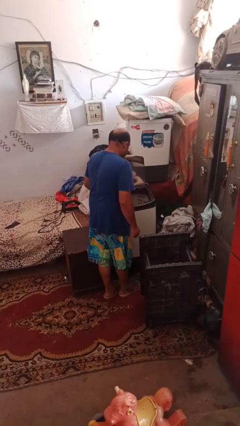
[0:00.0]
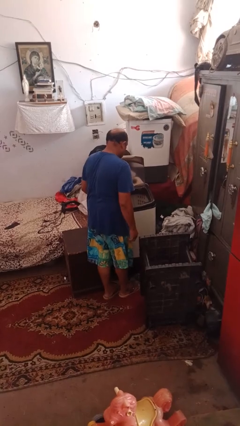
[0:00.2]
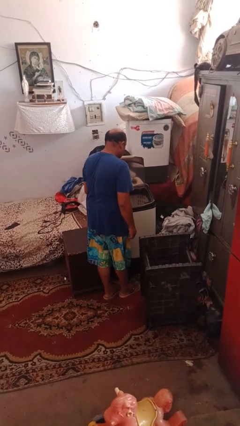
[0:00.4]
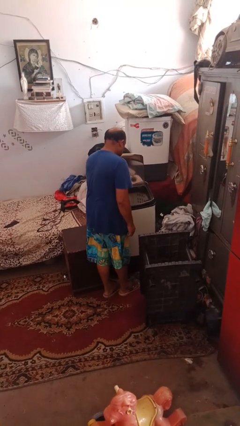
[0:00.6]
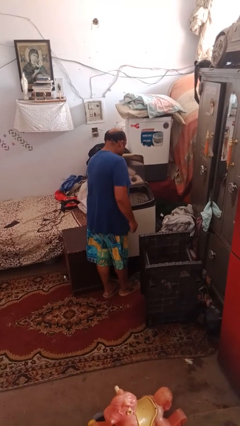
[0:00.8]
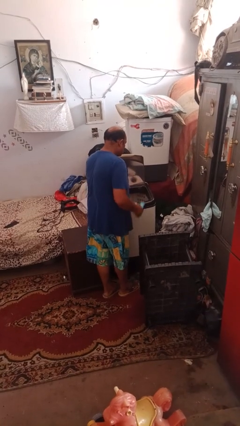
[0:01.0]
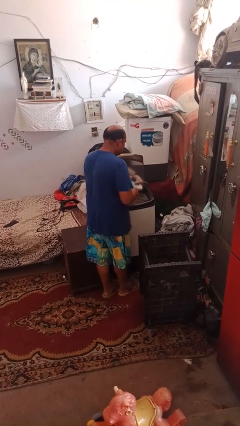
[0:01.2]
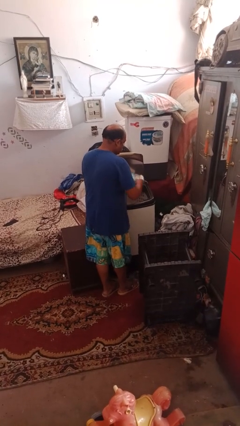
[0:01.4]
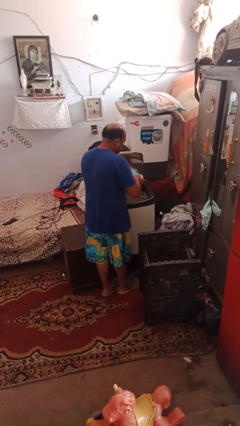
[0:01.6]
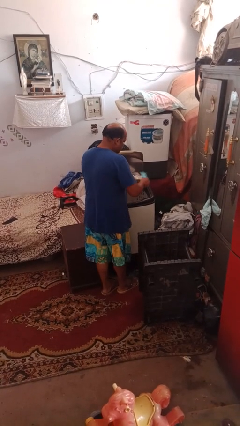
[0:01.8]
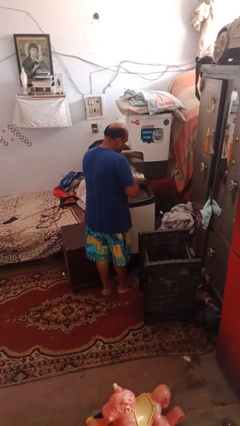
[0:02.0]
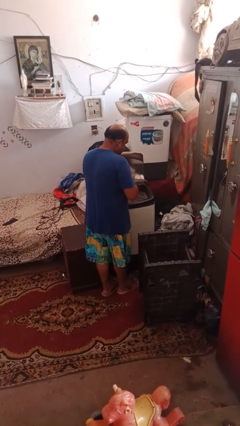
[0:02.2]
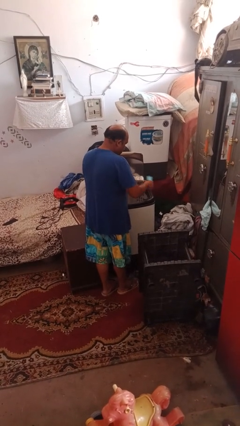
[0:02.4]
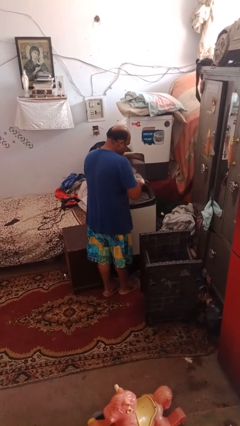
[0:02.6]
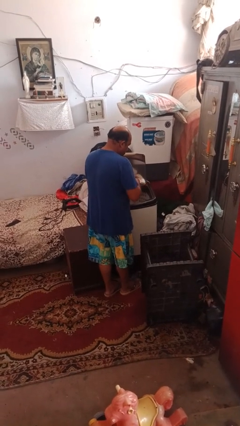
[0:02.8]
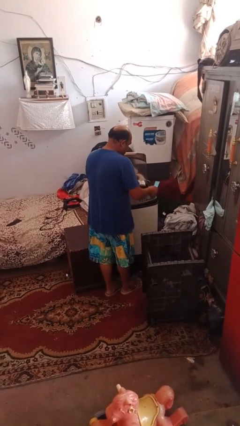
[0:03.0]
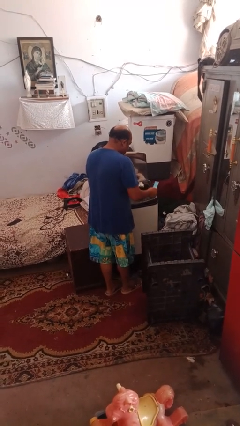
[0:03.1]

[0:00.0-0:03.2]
person cleans dryer lint trap

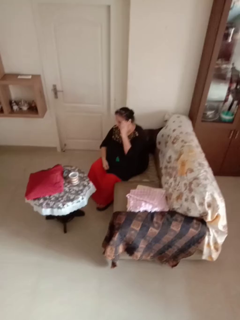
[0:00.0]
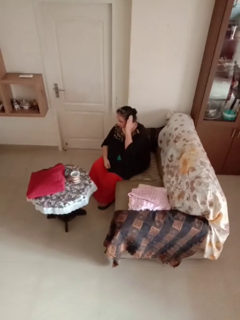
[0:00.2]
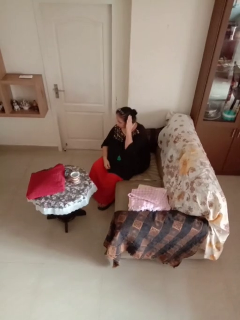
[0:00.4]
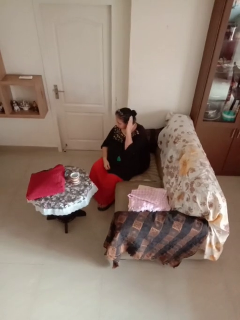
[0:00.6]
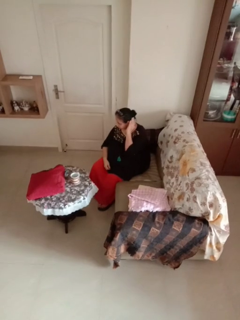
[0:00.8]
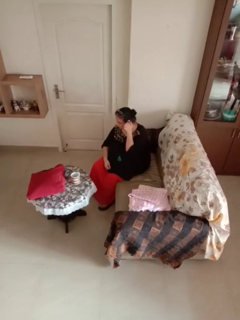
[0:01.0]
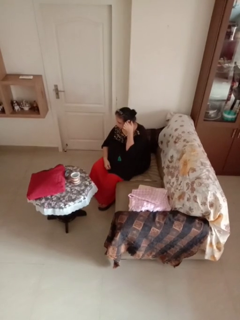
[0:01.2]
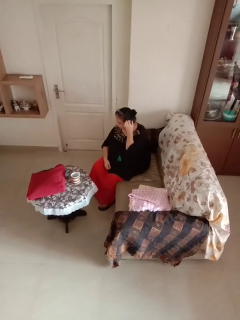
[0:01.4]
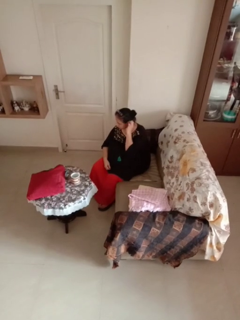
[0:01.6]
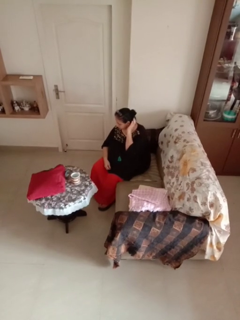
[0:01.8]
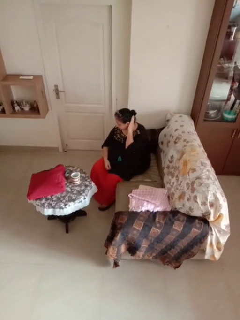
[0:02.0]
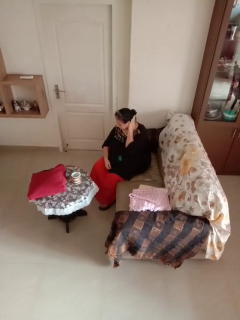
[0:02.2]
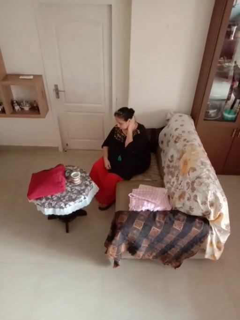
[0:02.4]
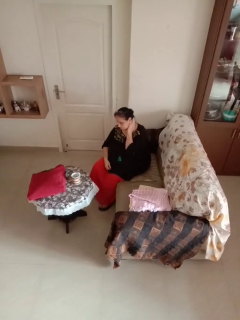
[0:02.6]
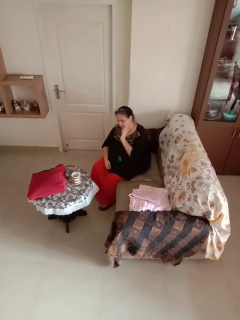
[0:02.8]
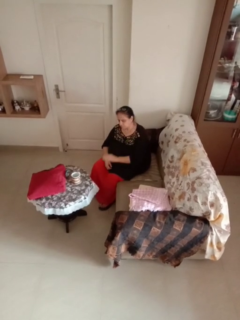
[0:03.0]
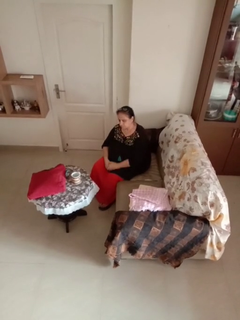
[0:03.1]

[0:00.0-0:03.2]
person strokes hair

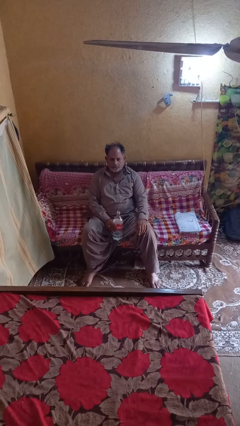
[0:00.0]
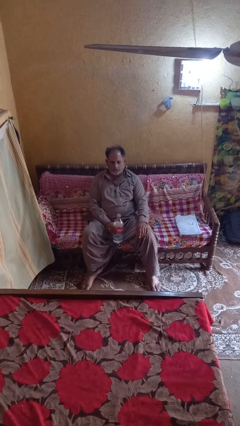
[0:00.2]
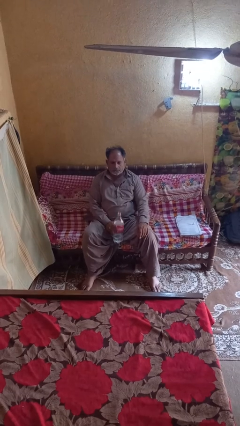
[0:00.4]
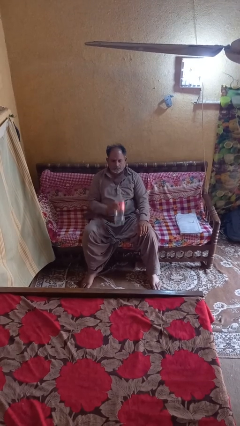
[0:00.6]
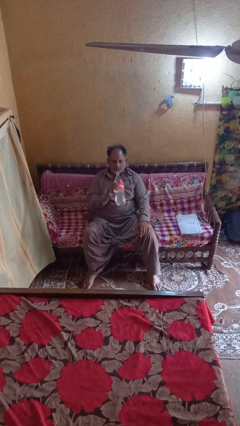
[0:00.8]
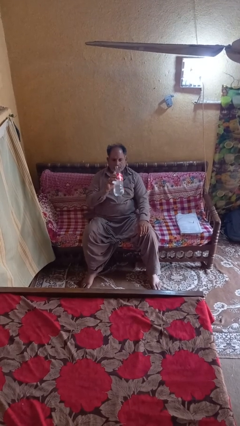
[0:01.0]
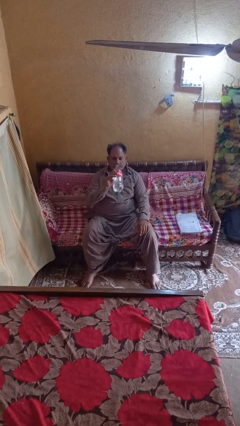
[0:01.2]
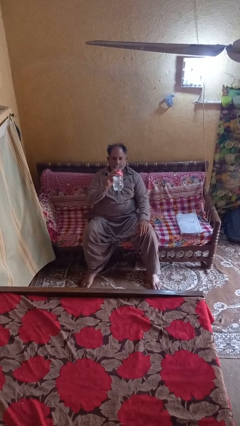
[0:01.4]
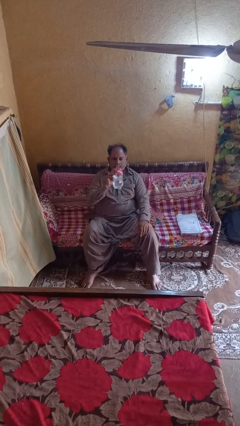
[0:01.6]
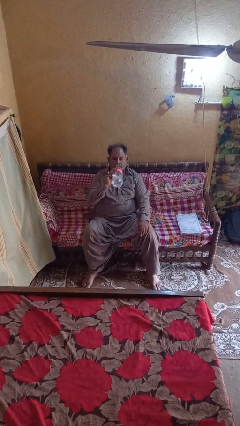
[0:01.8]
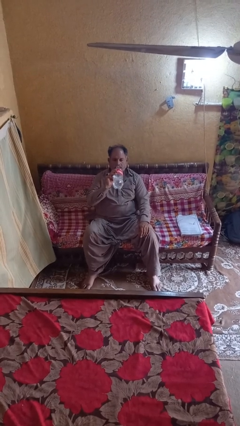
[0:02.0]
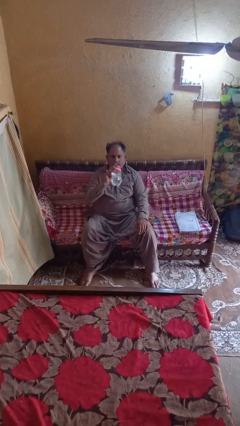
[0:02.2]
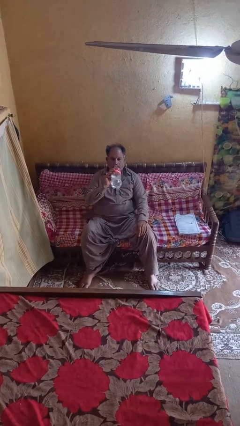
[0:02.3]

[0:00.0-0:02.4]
person drinks from bottle

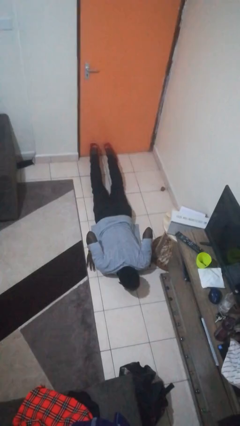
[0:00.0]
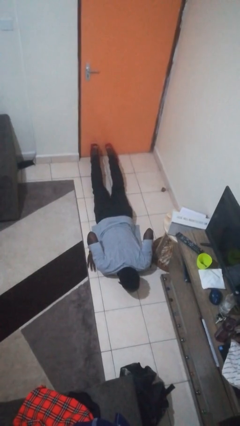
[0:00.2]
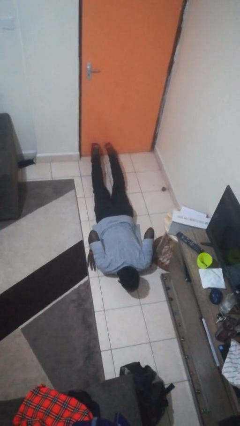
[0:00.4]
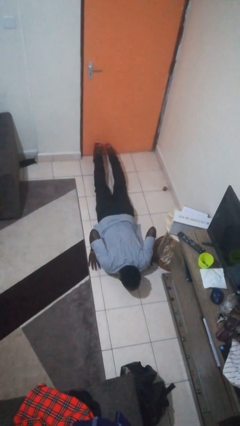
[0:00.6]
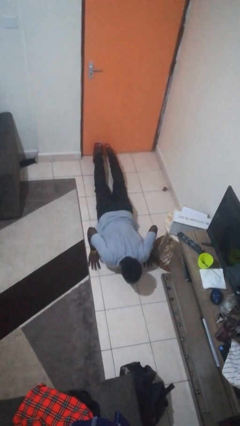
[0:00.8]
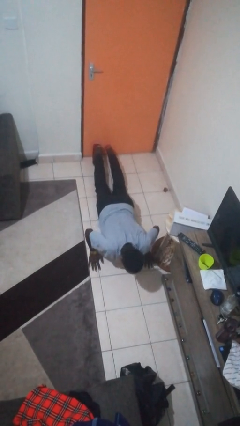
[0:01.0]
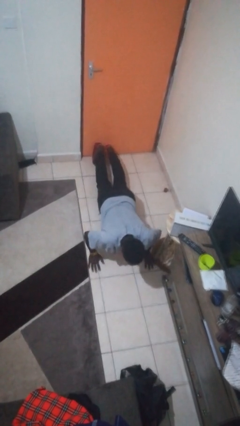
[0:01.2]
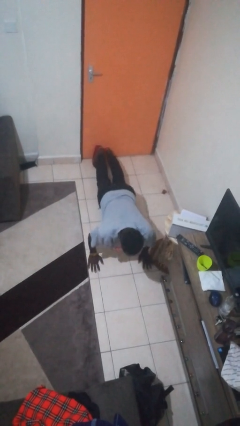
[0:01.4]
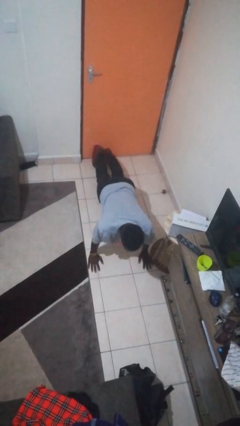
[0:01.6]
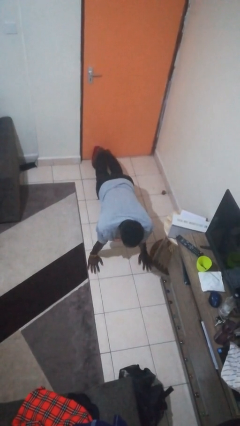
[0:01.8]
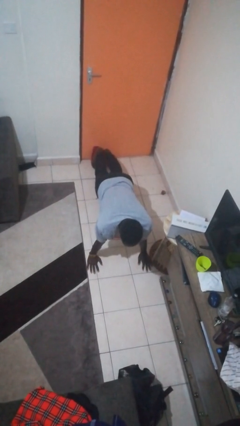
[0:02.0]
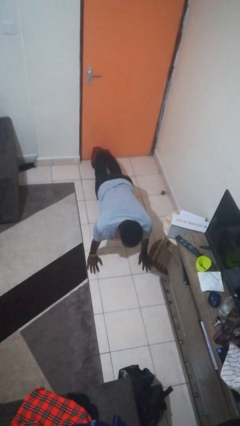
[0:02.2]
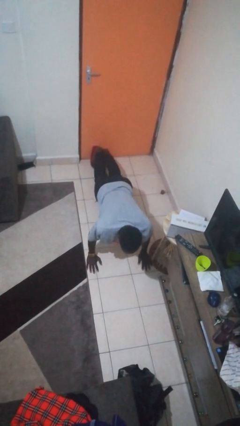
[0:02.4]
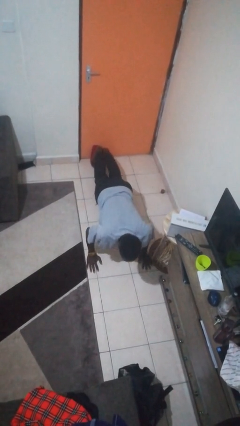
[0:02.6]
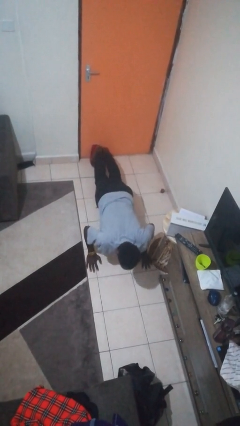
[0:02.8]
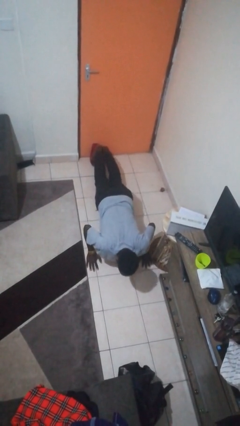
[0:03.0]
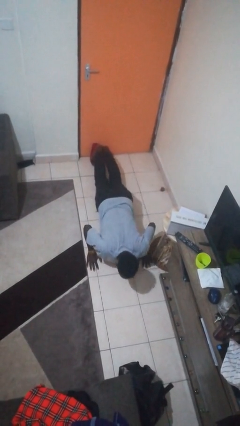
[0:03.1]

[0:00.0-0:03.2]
person exercises with pushup

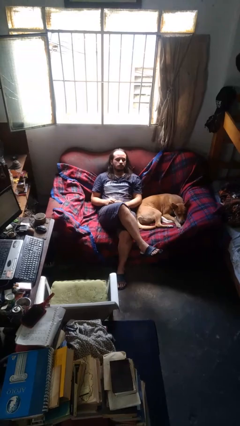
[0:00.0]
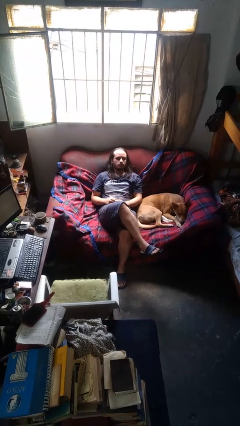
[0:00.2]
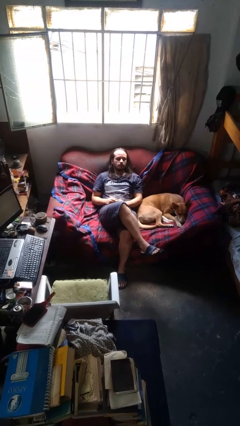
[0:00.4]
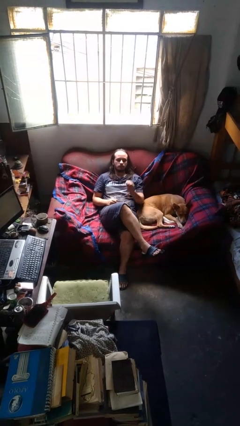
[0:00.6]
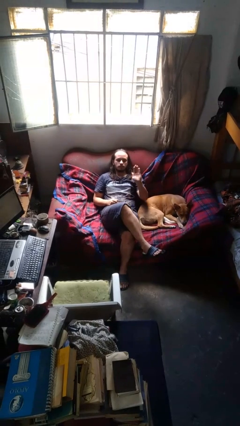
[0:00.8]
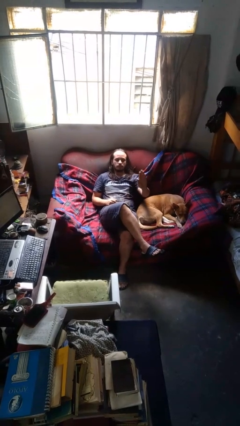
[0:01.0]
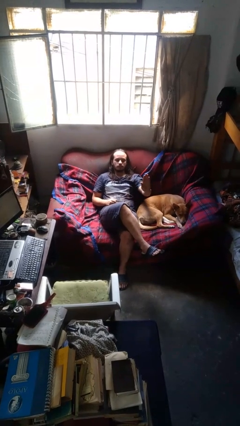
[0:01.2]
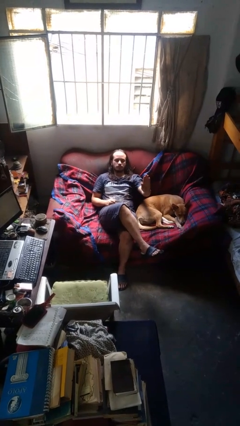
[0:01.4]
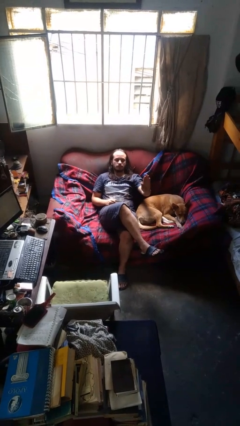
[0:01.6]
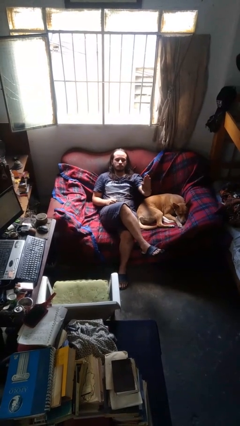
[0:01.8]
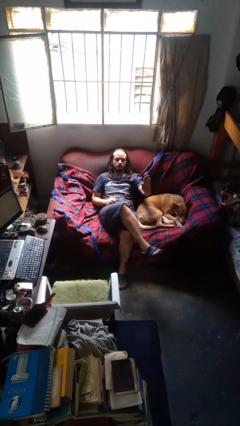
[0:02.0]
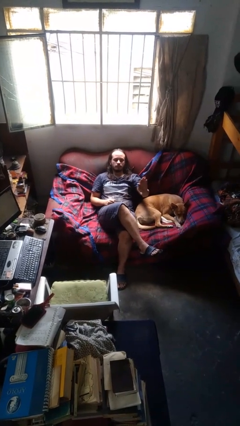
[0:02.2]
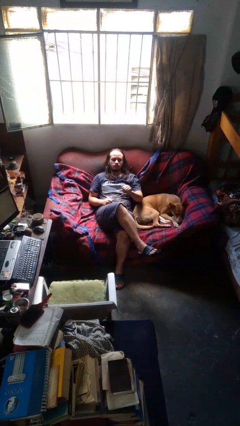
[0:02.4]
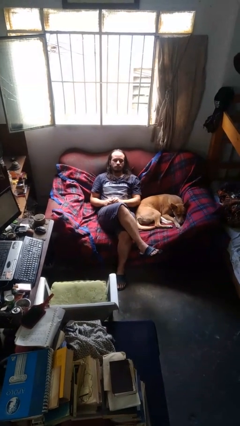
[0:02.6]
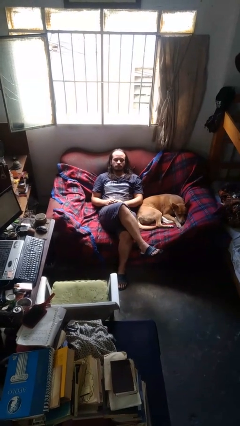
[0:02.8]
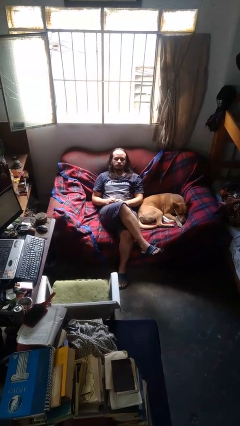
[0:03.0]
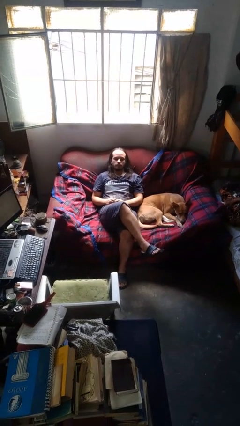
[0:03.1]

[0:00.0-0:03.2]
person gestures stop

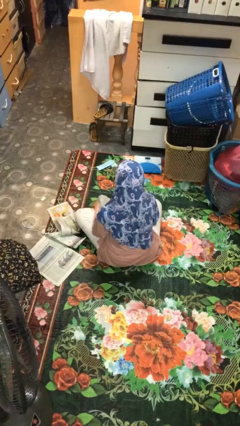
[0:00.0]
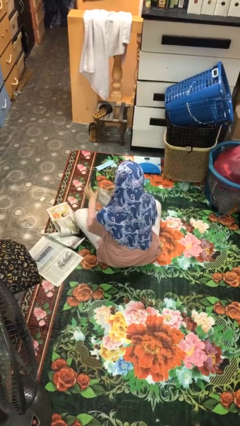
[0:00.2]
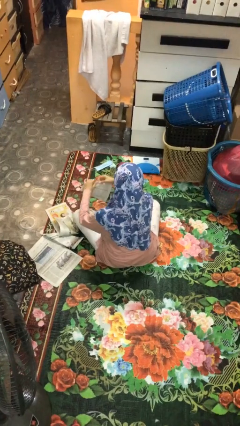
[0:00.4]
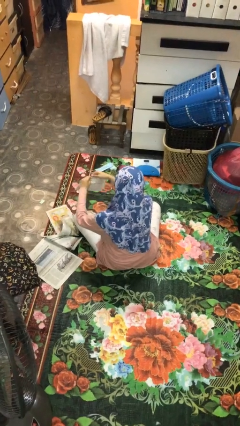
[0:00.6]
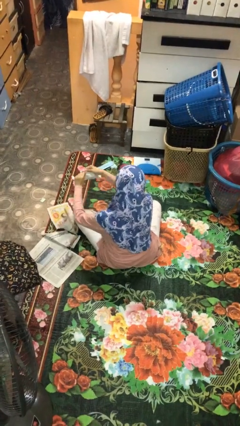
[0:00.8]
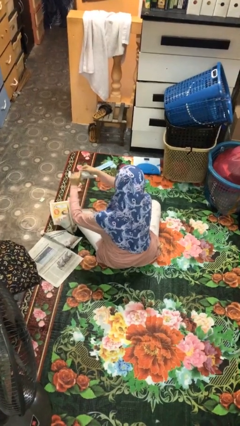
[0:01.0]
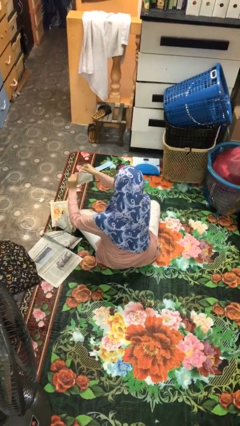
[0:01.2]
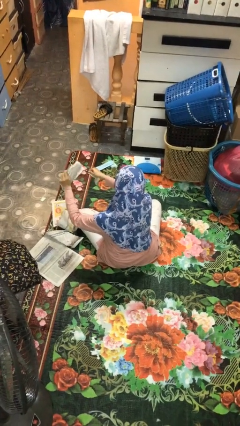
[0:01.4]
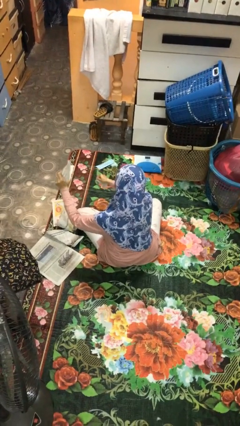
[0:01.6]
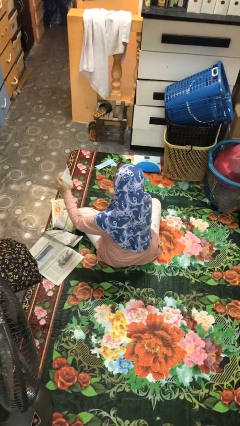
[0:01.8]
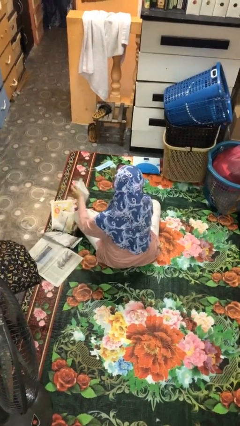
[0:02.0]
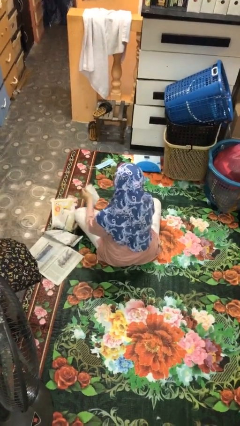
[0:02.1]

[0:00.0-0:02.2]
person tears paper

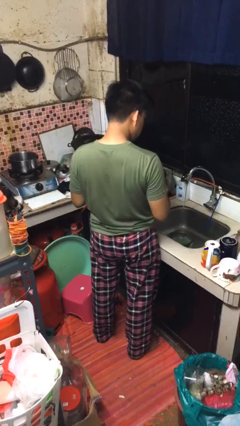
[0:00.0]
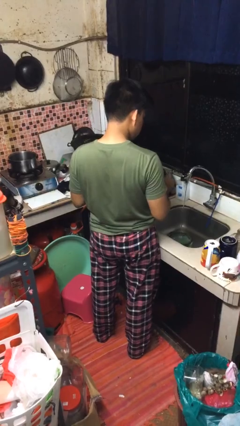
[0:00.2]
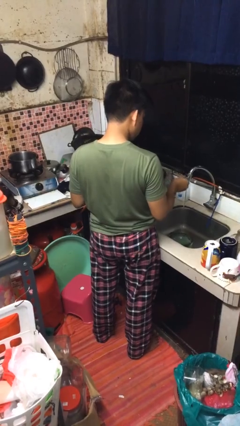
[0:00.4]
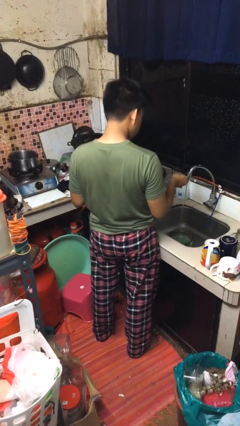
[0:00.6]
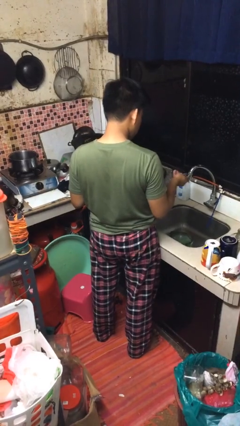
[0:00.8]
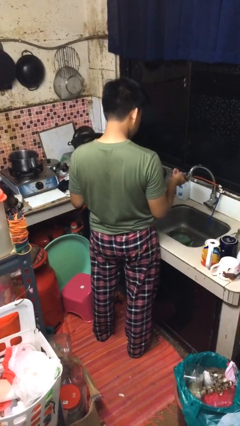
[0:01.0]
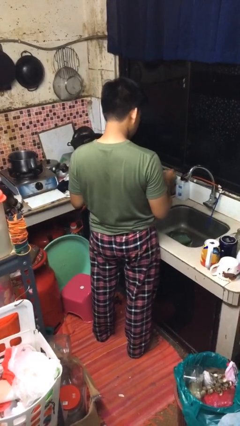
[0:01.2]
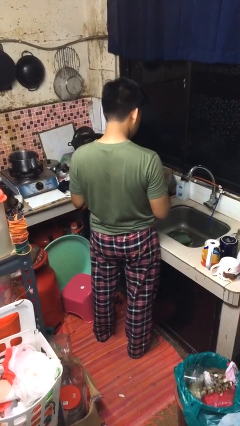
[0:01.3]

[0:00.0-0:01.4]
person turns off faucet
